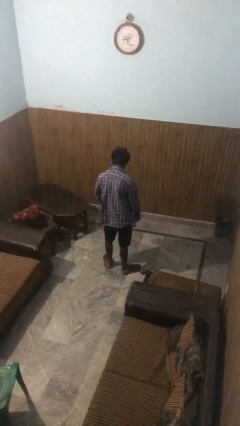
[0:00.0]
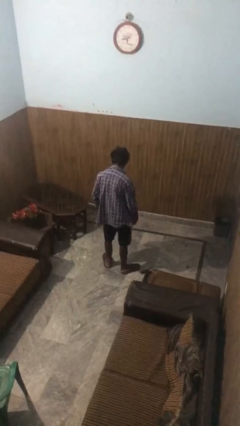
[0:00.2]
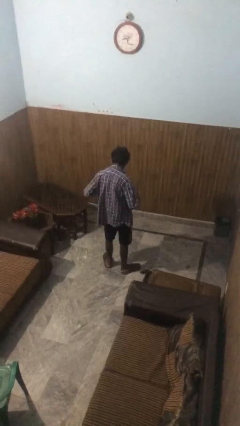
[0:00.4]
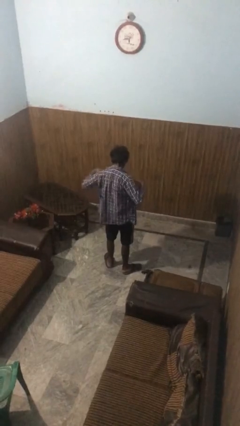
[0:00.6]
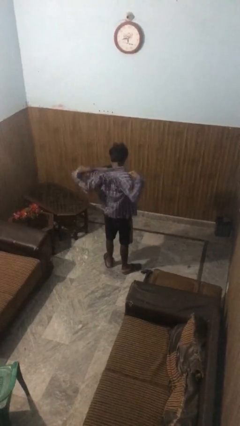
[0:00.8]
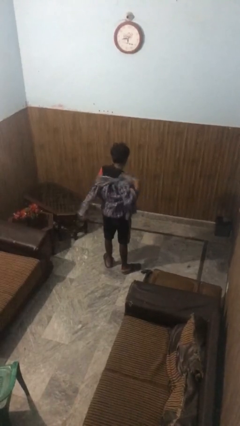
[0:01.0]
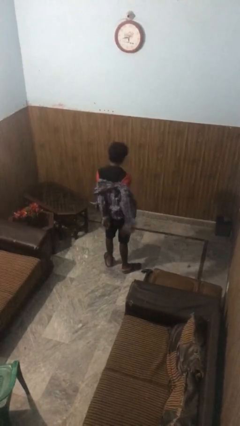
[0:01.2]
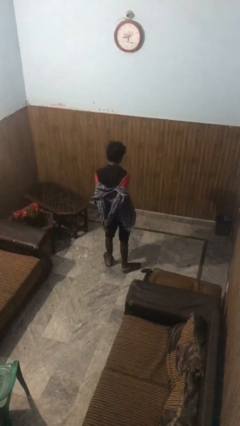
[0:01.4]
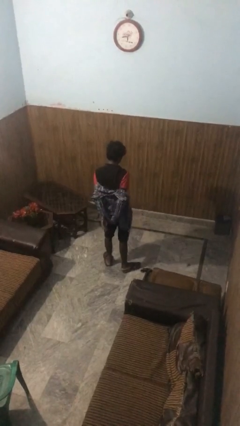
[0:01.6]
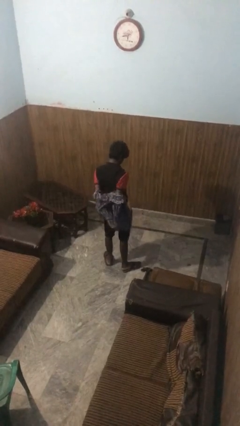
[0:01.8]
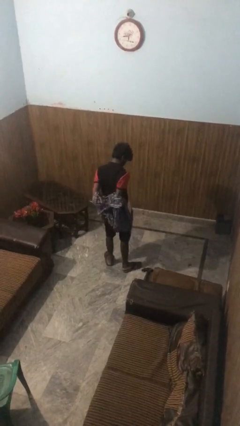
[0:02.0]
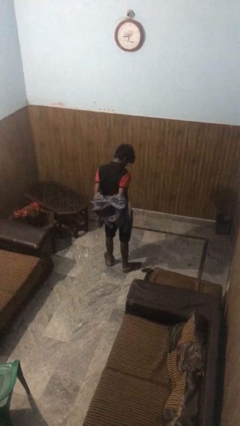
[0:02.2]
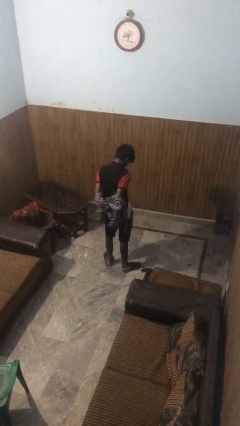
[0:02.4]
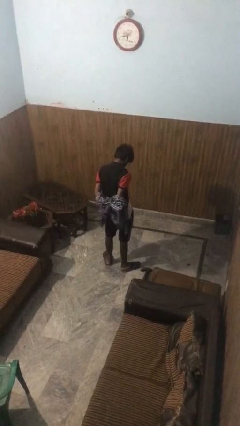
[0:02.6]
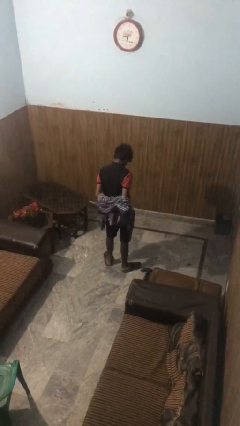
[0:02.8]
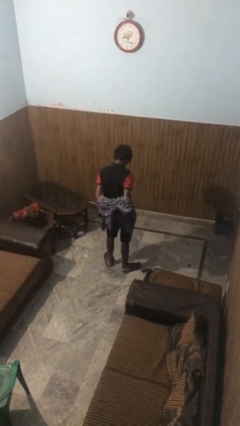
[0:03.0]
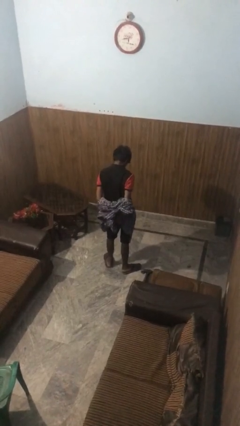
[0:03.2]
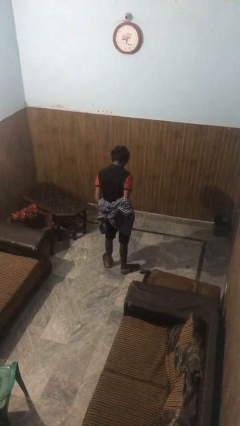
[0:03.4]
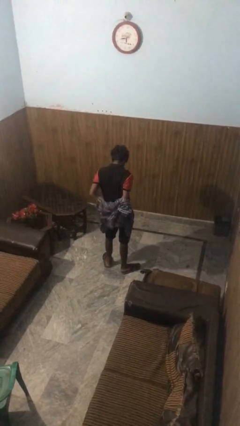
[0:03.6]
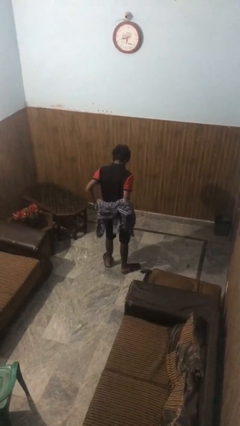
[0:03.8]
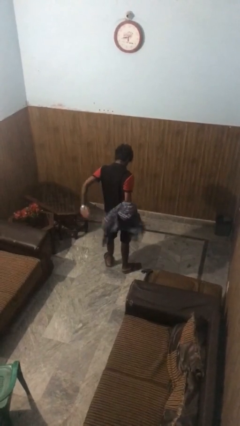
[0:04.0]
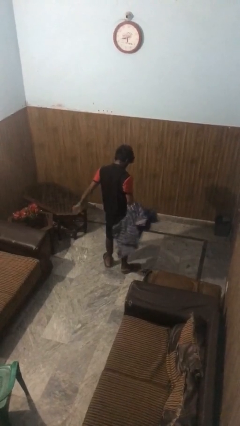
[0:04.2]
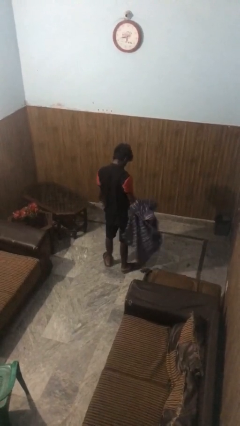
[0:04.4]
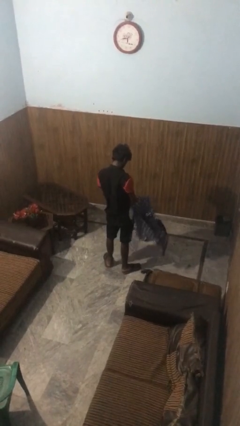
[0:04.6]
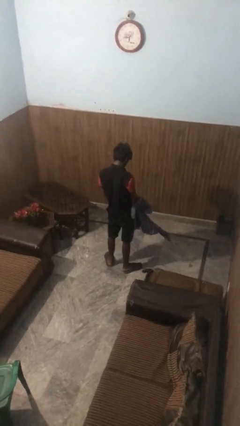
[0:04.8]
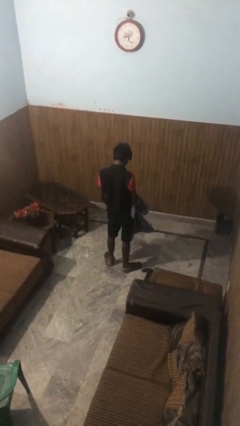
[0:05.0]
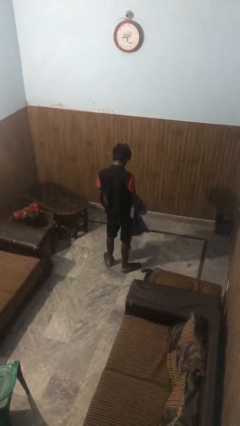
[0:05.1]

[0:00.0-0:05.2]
person takes off shirt

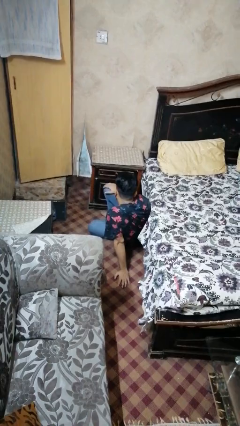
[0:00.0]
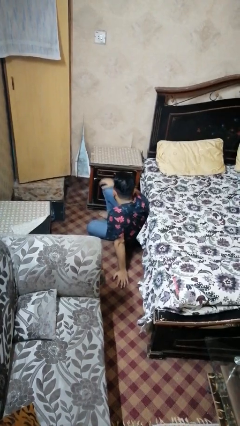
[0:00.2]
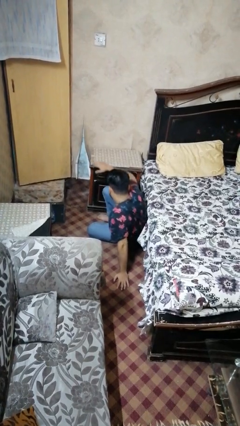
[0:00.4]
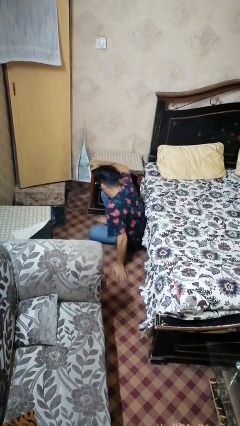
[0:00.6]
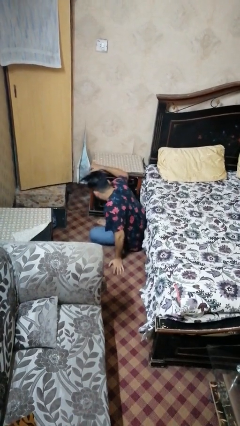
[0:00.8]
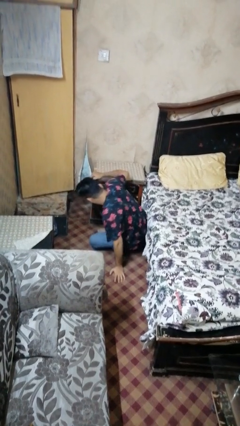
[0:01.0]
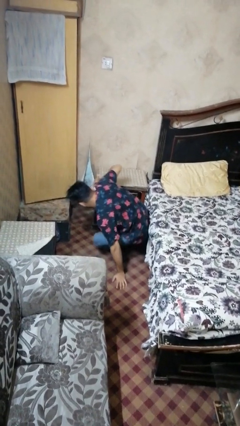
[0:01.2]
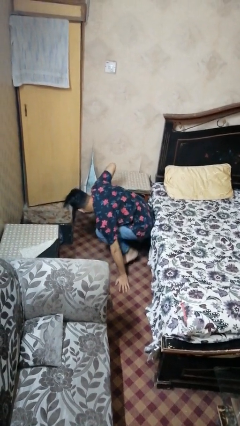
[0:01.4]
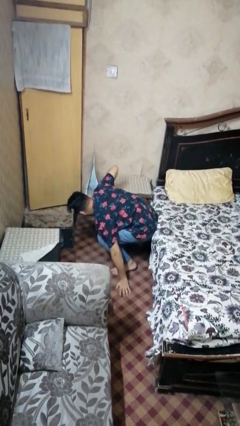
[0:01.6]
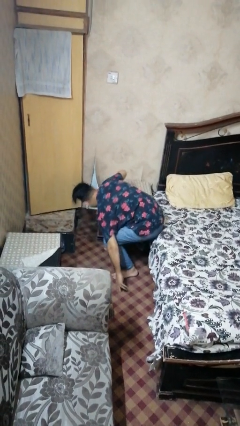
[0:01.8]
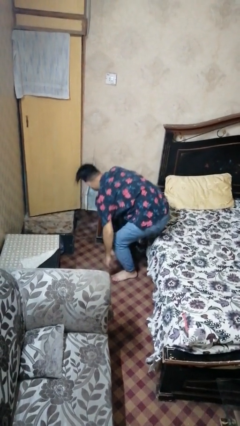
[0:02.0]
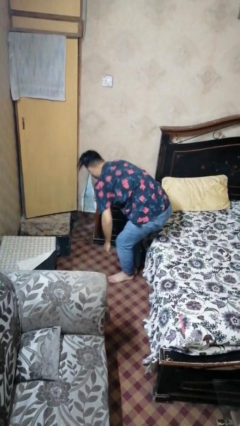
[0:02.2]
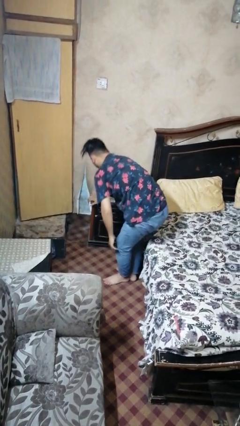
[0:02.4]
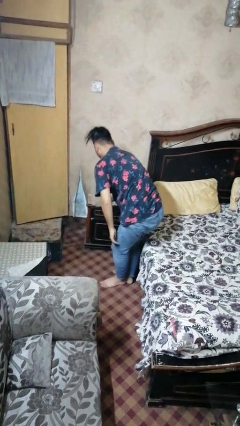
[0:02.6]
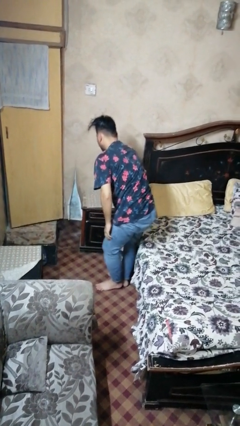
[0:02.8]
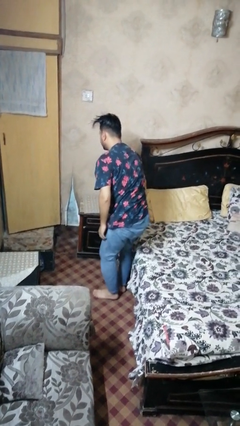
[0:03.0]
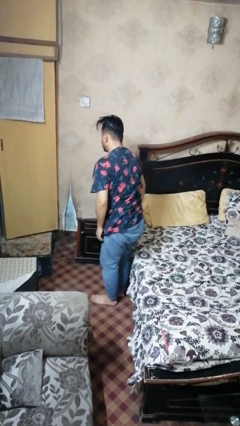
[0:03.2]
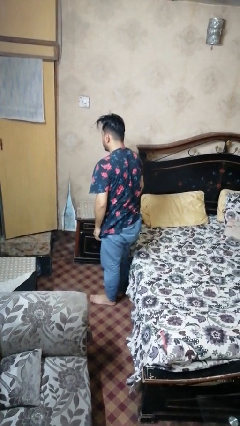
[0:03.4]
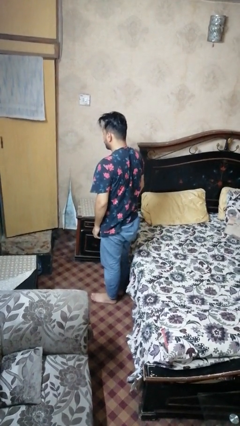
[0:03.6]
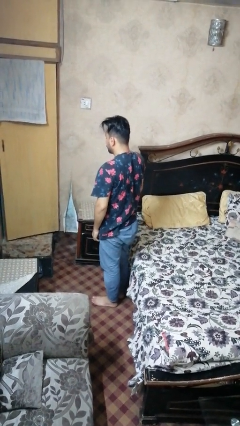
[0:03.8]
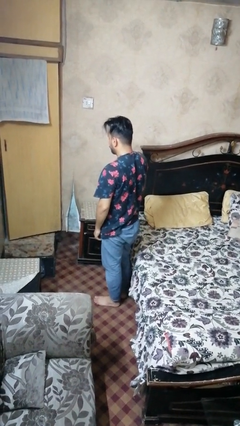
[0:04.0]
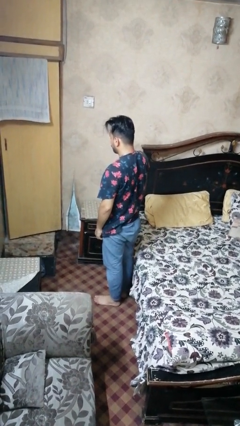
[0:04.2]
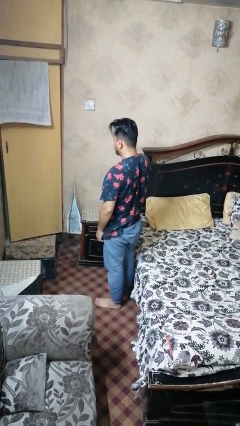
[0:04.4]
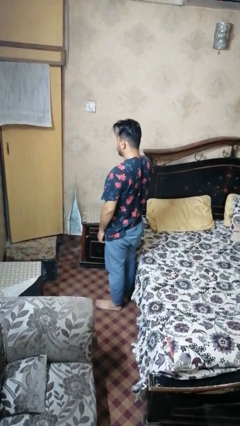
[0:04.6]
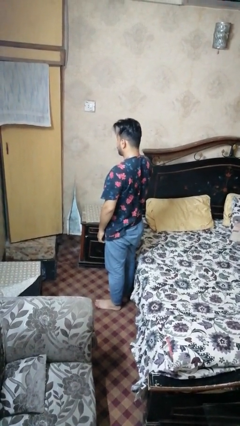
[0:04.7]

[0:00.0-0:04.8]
person stands up from floor

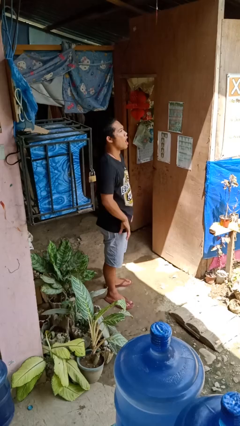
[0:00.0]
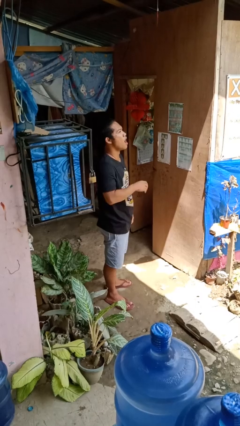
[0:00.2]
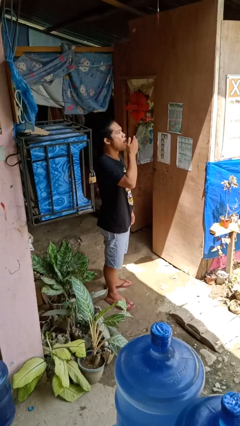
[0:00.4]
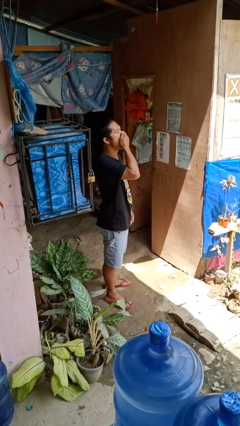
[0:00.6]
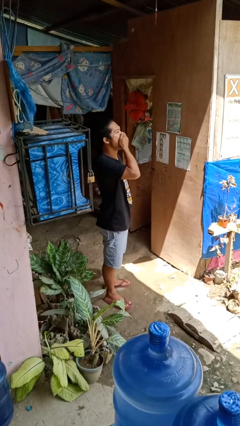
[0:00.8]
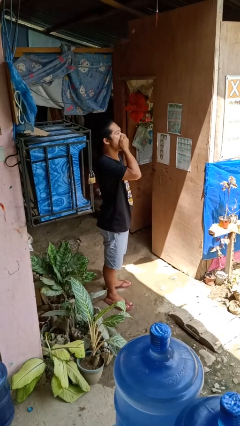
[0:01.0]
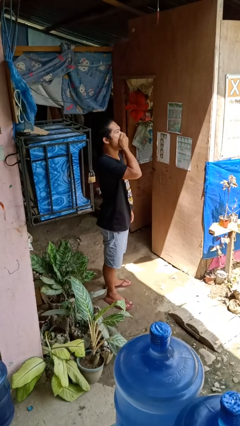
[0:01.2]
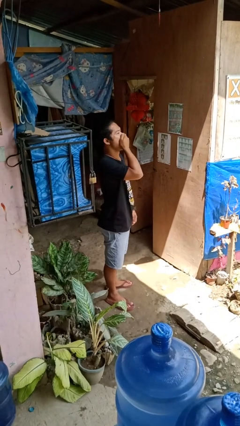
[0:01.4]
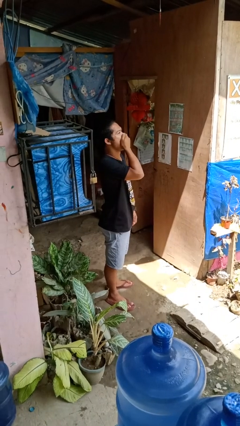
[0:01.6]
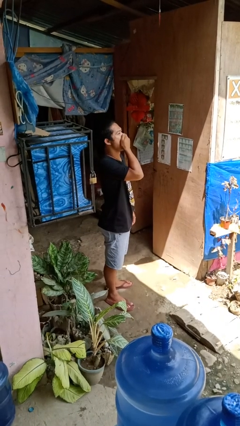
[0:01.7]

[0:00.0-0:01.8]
person yawns

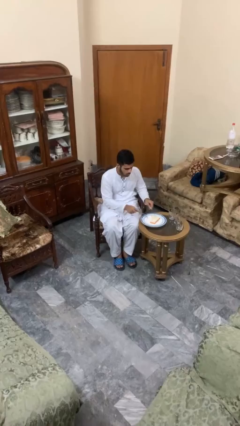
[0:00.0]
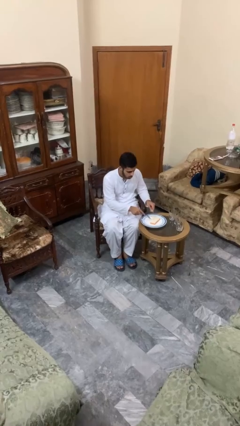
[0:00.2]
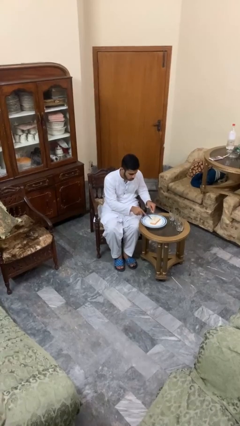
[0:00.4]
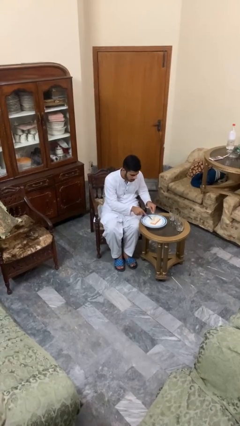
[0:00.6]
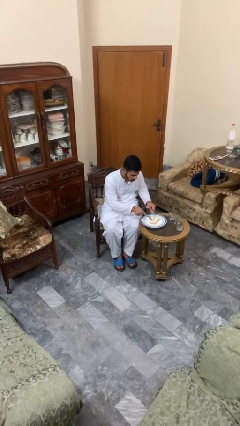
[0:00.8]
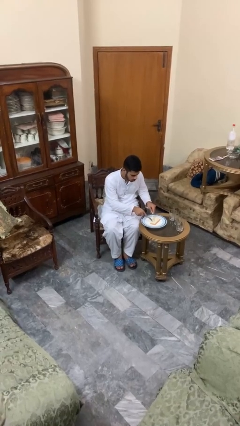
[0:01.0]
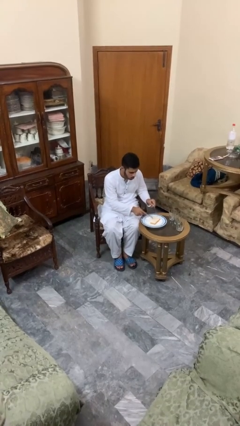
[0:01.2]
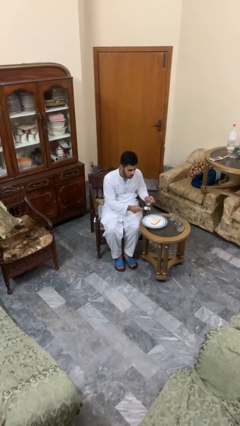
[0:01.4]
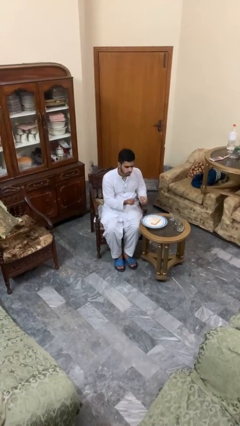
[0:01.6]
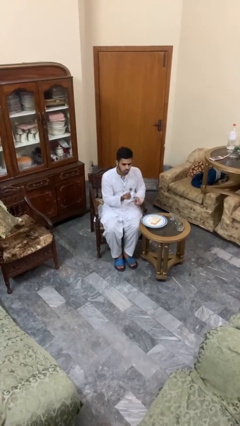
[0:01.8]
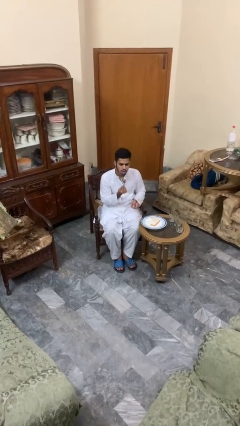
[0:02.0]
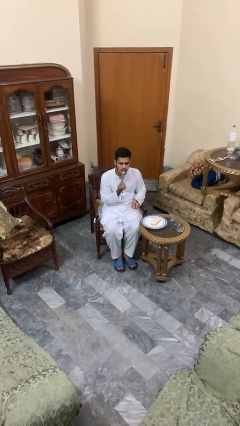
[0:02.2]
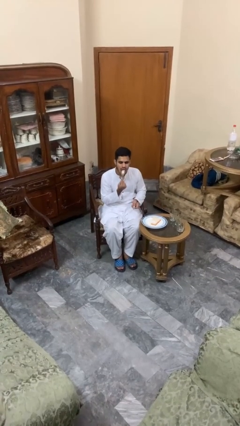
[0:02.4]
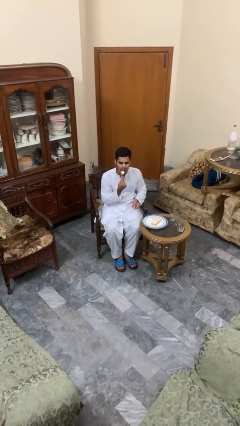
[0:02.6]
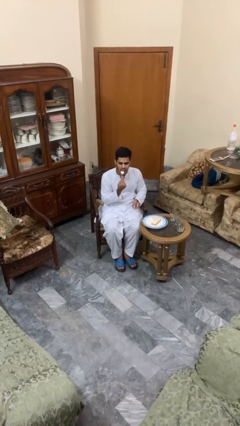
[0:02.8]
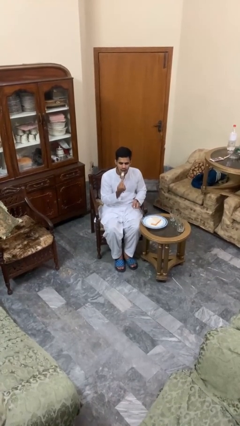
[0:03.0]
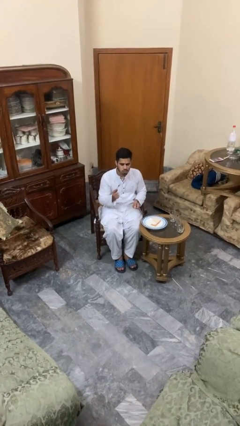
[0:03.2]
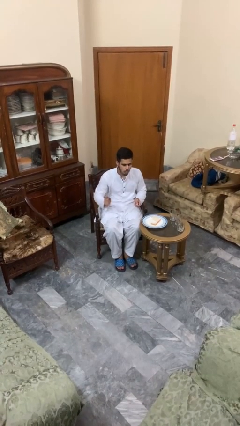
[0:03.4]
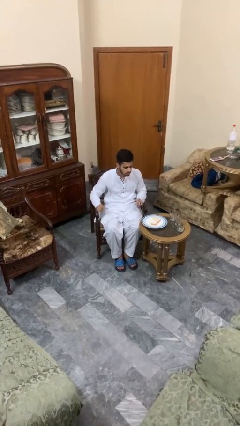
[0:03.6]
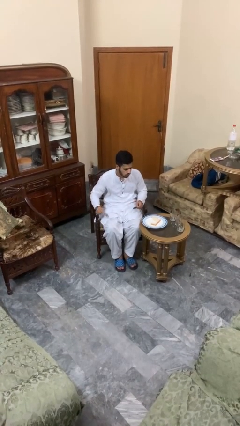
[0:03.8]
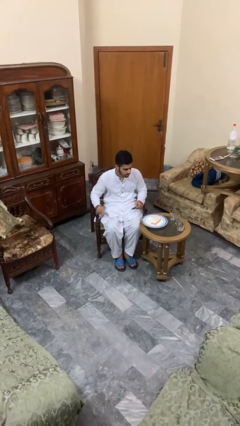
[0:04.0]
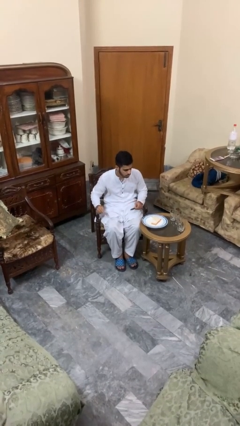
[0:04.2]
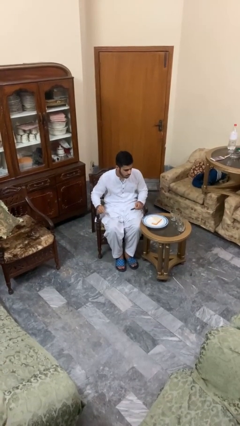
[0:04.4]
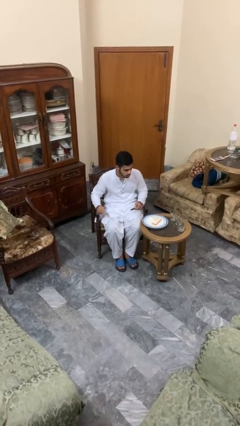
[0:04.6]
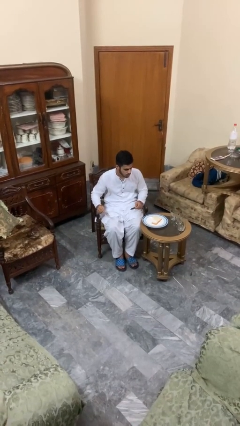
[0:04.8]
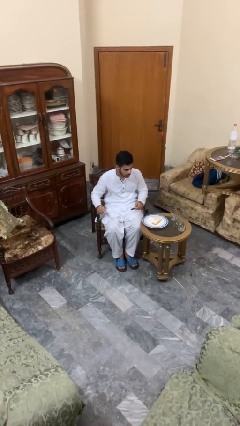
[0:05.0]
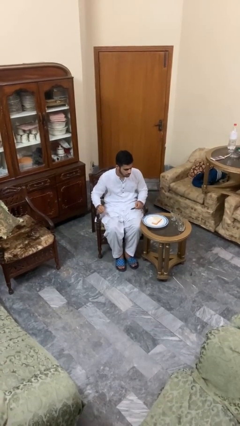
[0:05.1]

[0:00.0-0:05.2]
person eats with utensil

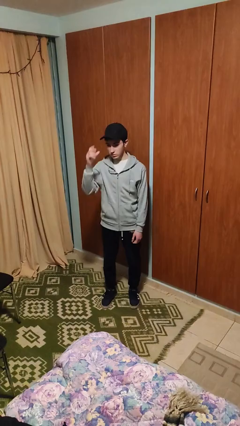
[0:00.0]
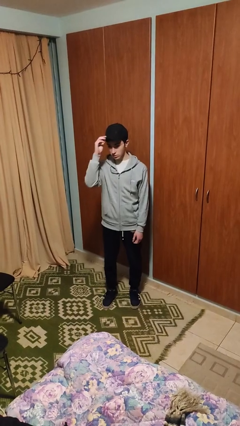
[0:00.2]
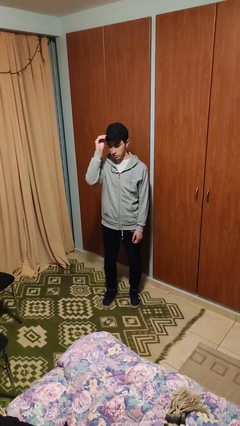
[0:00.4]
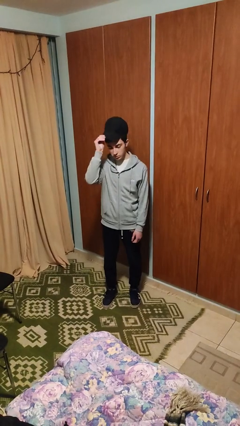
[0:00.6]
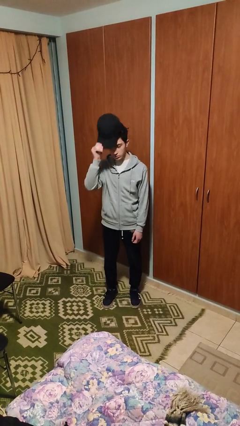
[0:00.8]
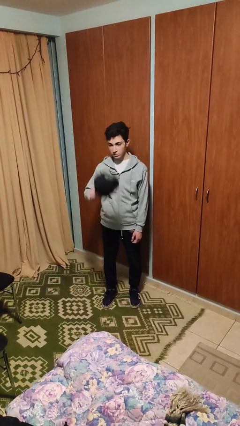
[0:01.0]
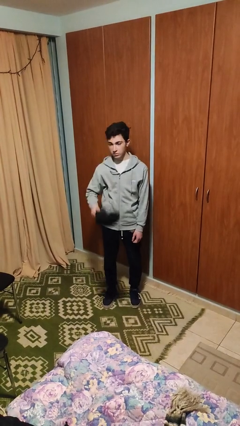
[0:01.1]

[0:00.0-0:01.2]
person takes off hat
